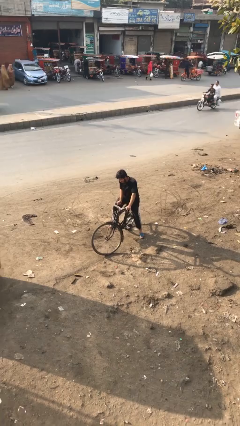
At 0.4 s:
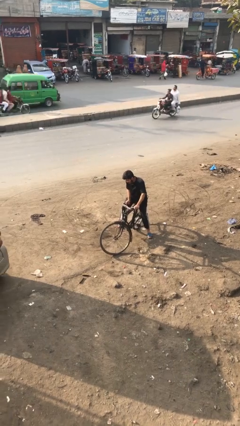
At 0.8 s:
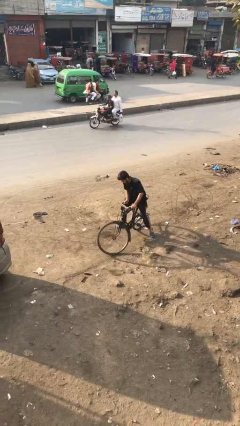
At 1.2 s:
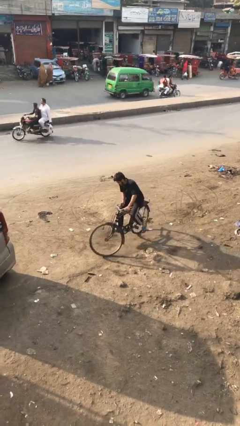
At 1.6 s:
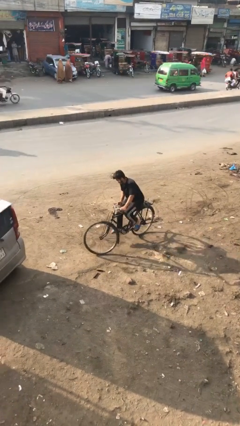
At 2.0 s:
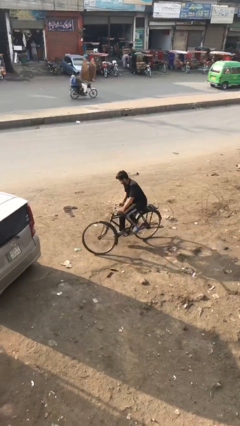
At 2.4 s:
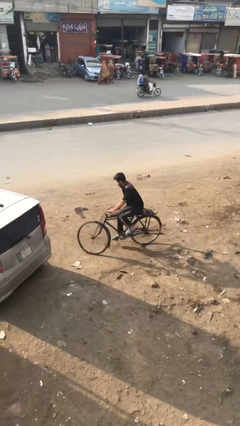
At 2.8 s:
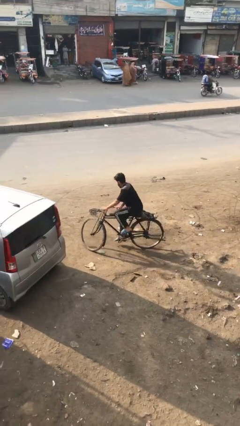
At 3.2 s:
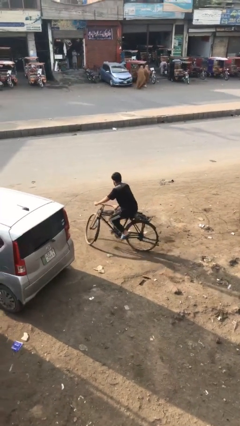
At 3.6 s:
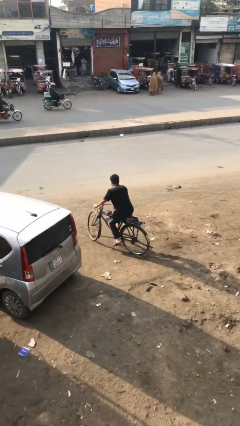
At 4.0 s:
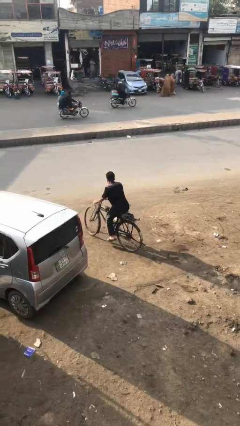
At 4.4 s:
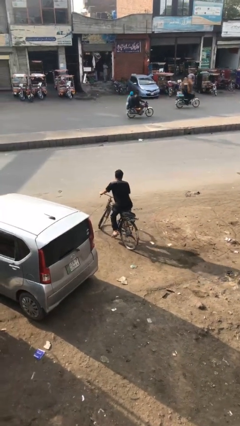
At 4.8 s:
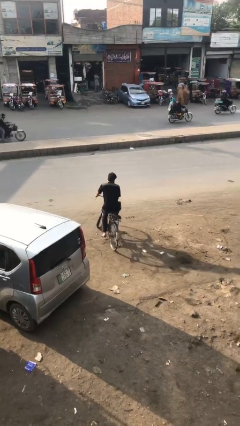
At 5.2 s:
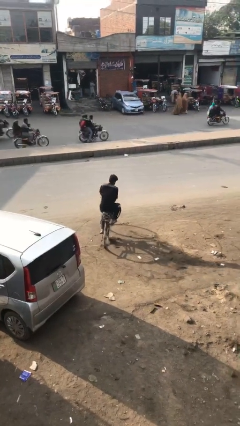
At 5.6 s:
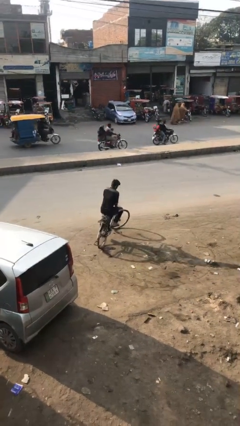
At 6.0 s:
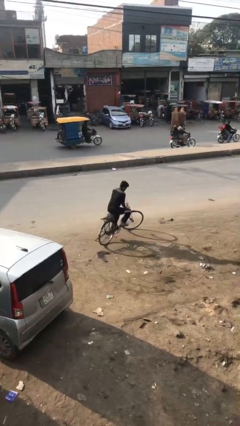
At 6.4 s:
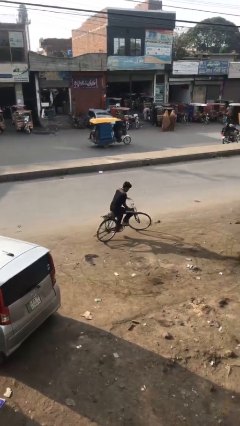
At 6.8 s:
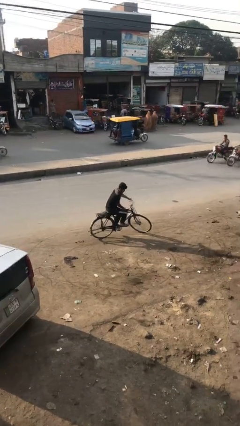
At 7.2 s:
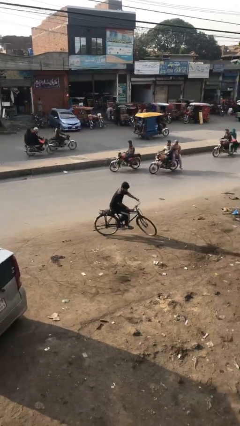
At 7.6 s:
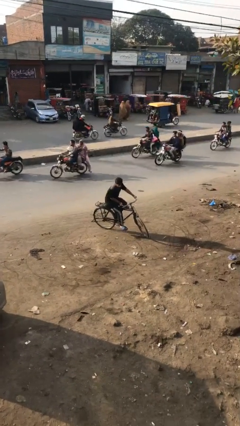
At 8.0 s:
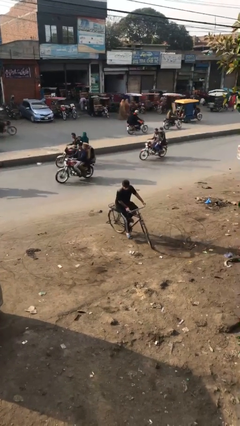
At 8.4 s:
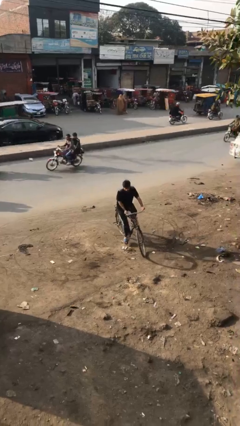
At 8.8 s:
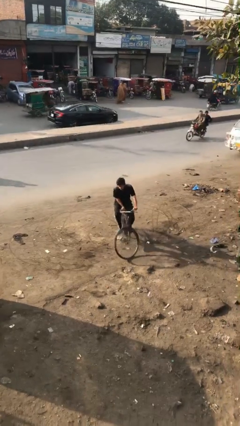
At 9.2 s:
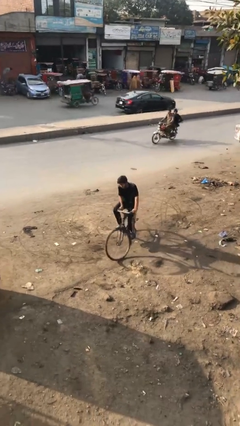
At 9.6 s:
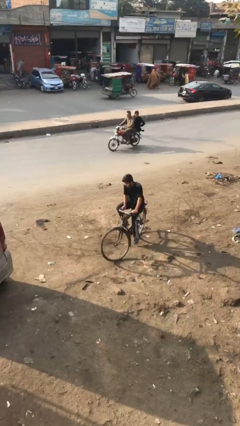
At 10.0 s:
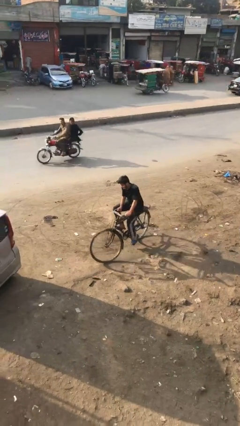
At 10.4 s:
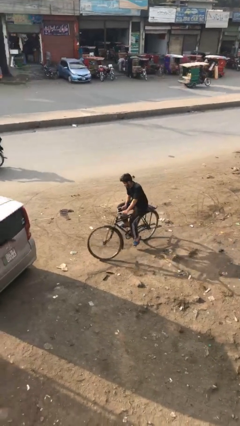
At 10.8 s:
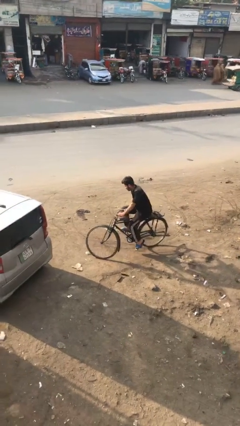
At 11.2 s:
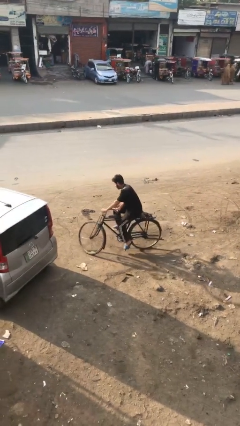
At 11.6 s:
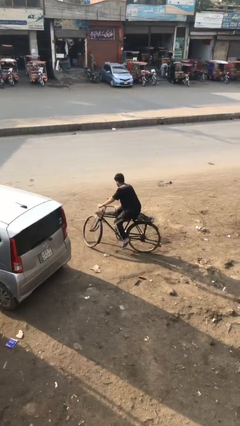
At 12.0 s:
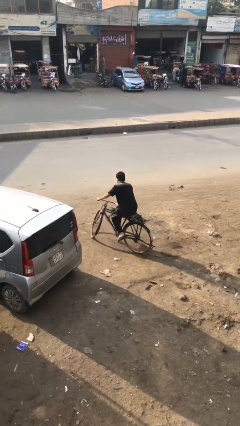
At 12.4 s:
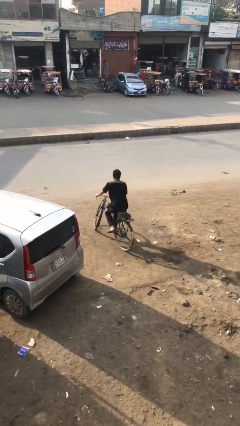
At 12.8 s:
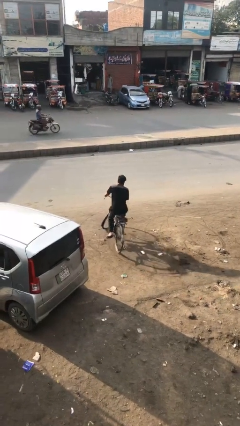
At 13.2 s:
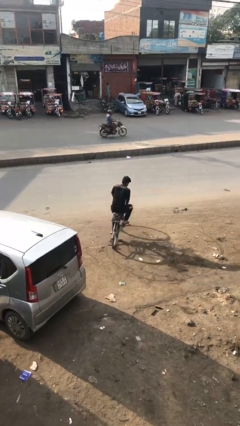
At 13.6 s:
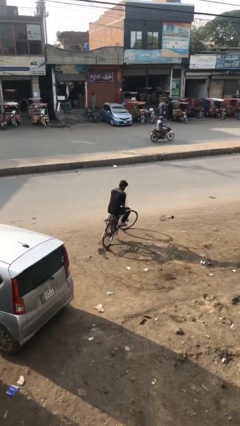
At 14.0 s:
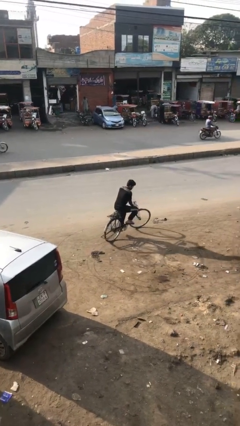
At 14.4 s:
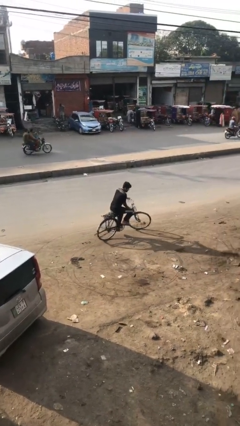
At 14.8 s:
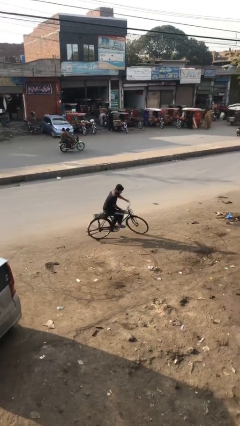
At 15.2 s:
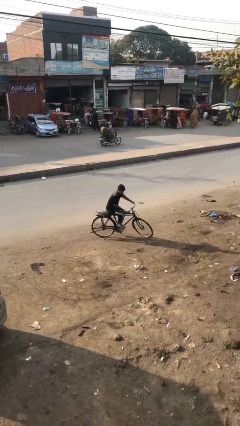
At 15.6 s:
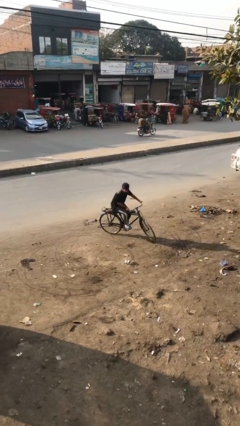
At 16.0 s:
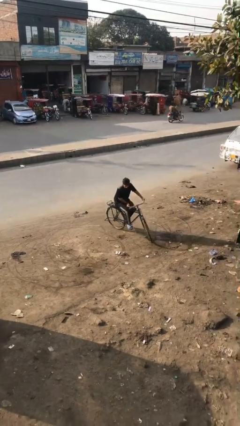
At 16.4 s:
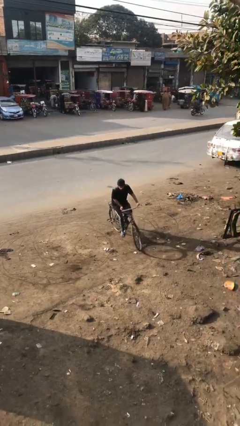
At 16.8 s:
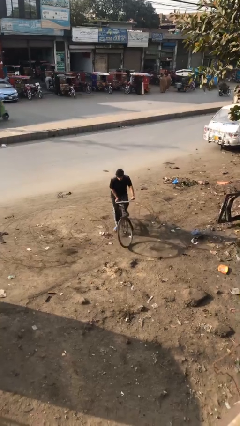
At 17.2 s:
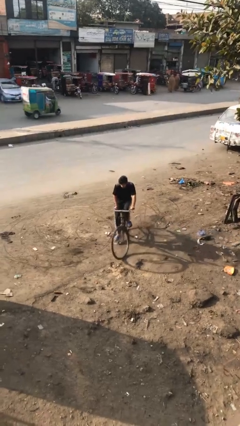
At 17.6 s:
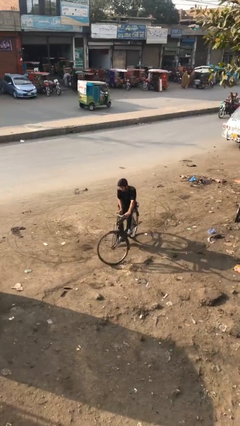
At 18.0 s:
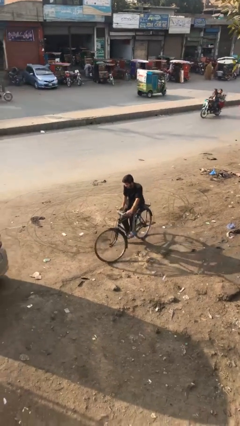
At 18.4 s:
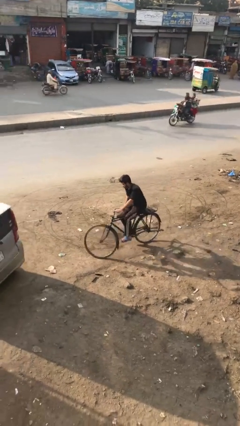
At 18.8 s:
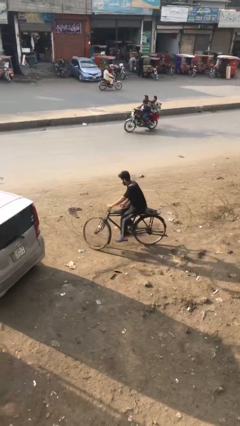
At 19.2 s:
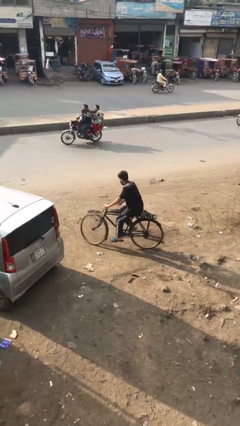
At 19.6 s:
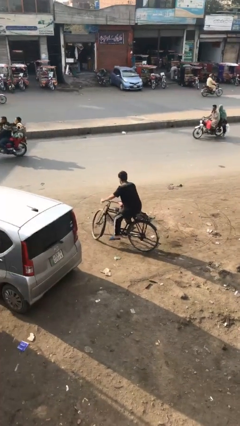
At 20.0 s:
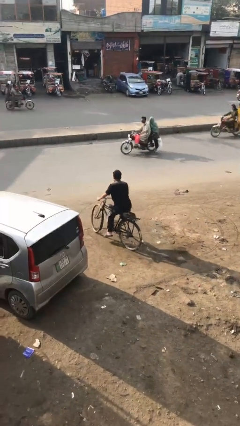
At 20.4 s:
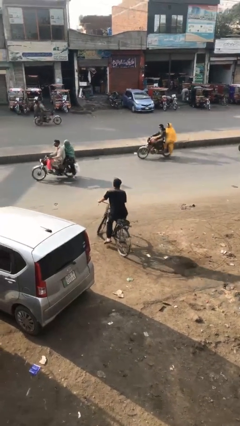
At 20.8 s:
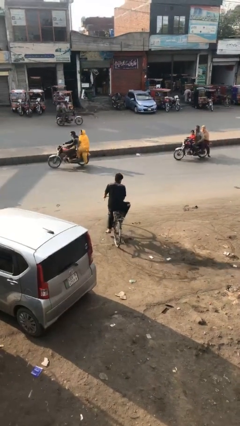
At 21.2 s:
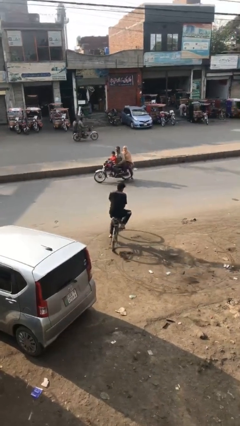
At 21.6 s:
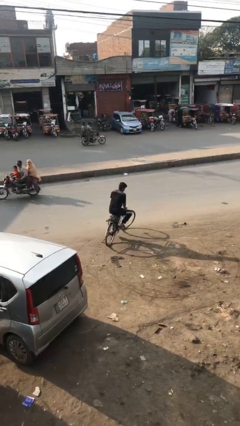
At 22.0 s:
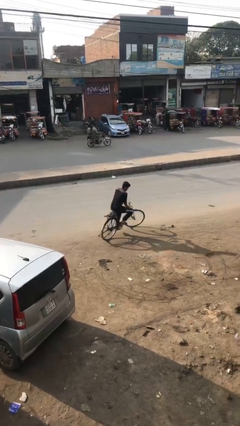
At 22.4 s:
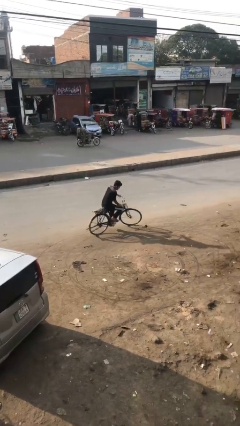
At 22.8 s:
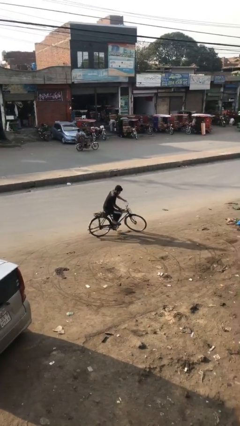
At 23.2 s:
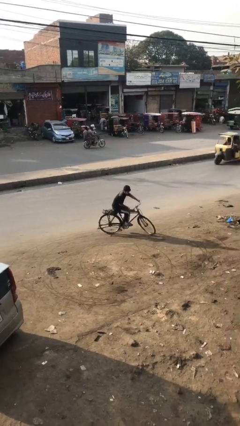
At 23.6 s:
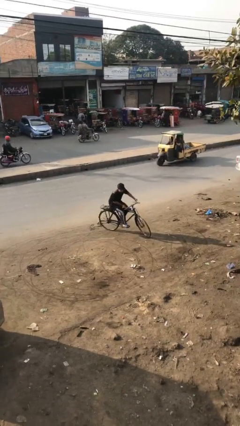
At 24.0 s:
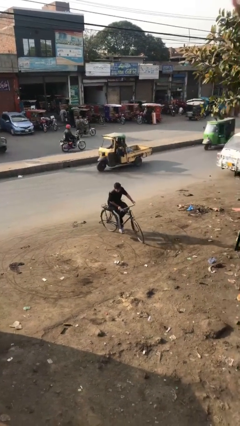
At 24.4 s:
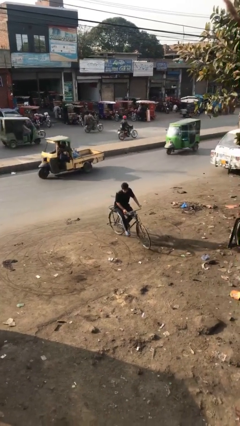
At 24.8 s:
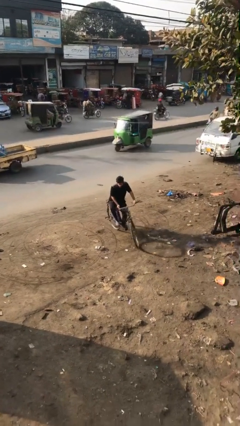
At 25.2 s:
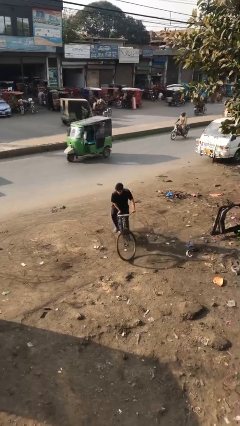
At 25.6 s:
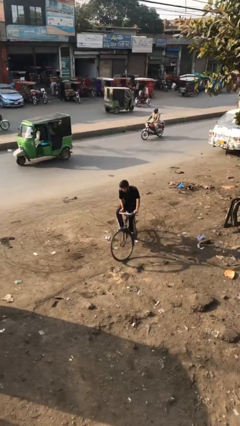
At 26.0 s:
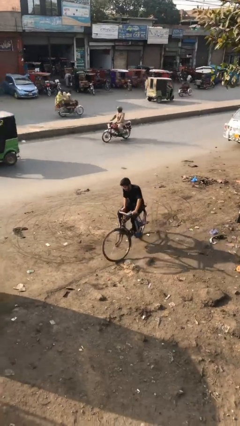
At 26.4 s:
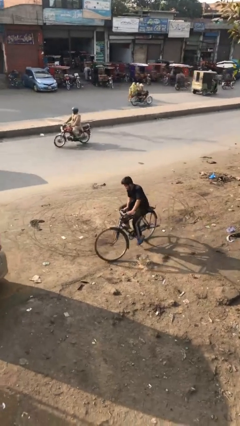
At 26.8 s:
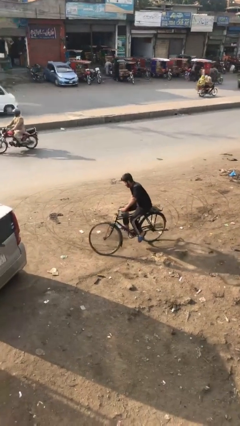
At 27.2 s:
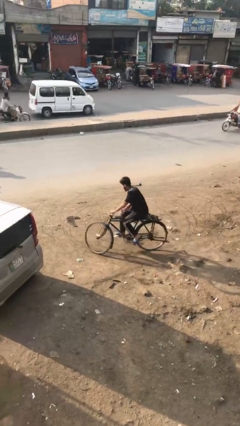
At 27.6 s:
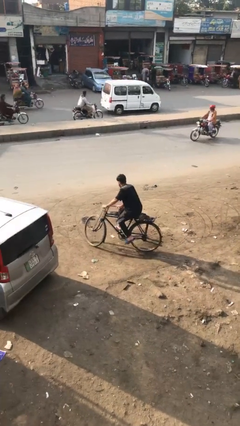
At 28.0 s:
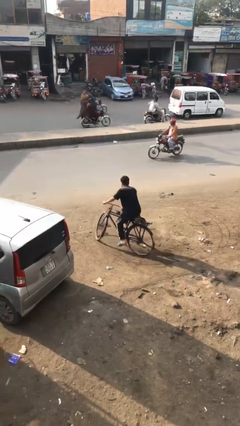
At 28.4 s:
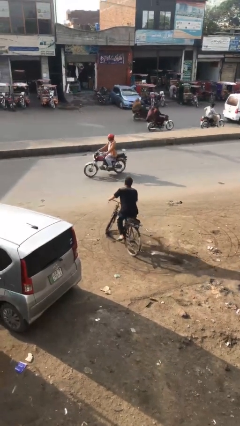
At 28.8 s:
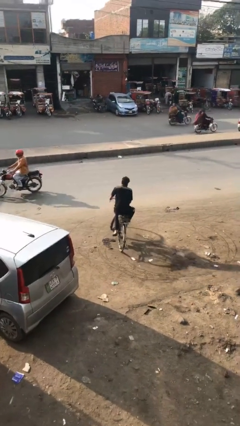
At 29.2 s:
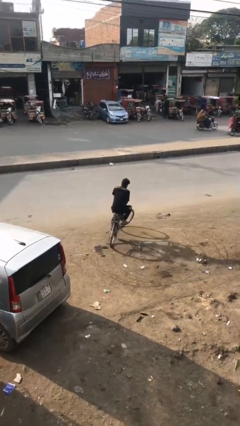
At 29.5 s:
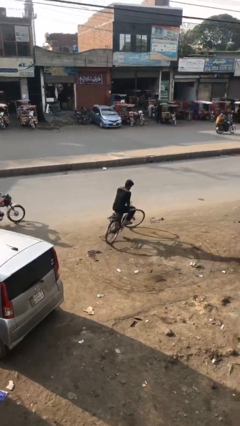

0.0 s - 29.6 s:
person rides bicycle

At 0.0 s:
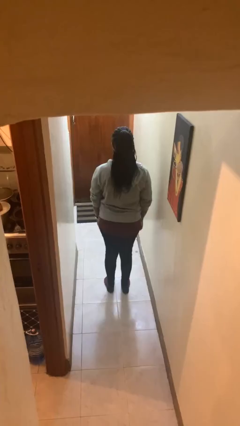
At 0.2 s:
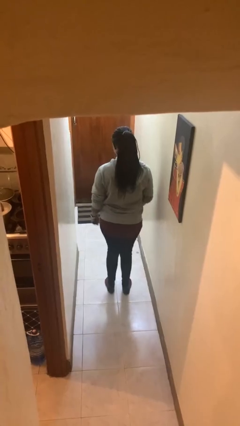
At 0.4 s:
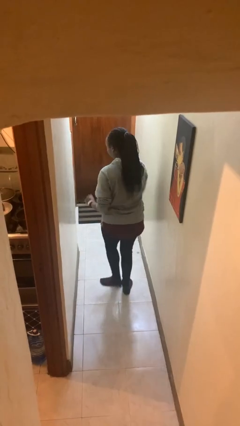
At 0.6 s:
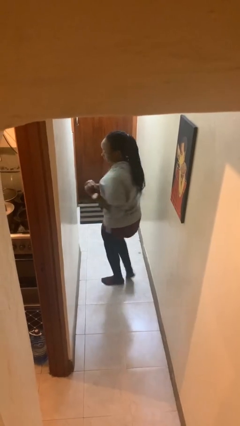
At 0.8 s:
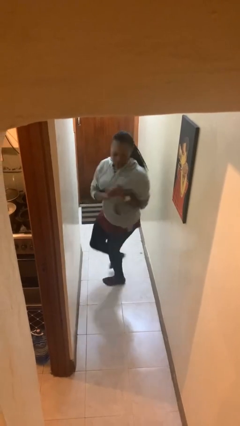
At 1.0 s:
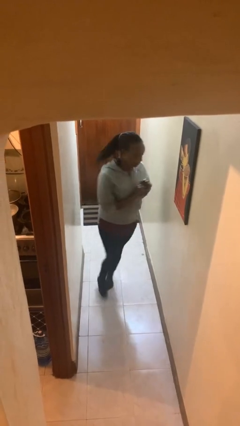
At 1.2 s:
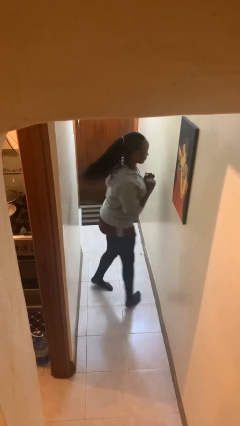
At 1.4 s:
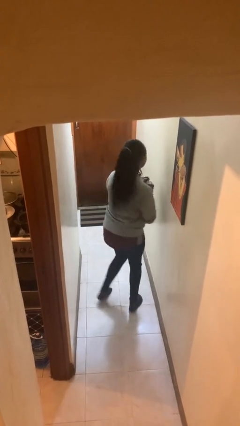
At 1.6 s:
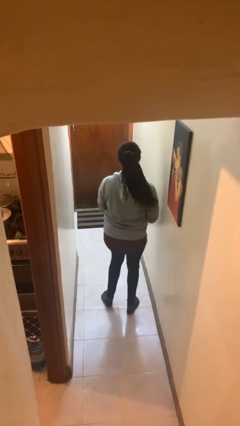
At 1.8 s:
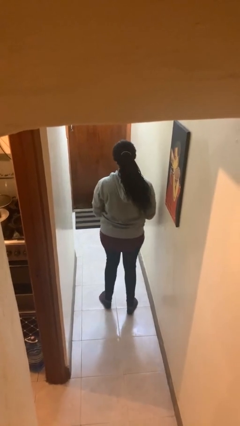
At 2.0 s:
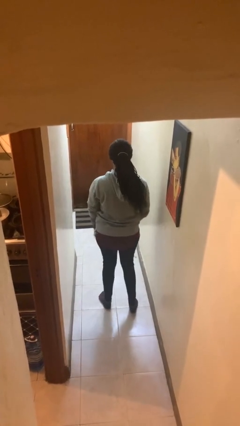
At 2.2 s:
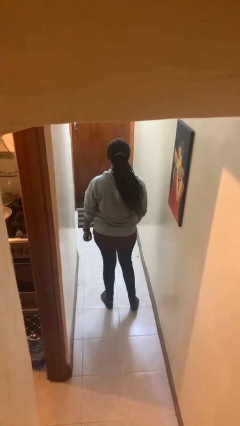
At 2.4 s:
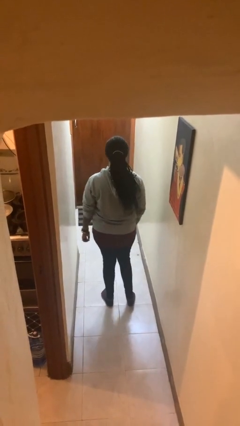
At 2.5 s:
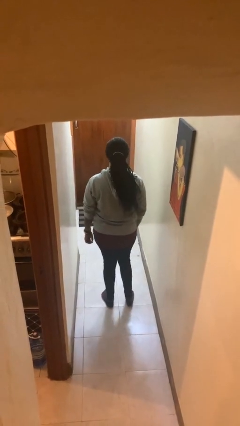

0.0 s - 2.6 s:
person twirls

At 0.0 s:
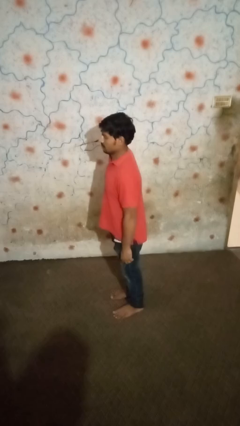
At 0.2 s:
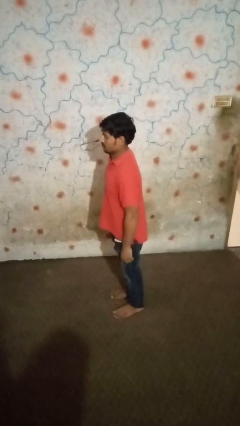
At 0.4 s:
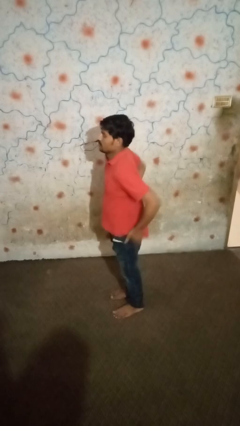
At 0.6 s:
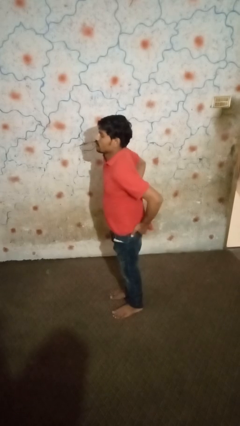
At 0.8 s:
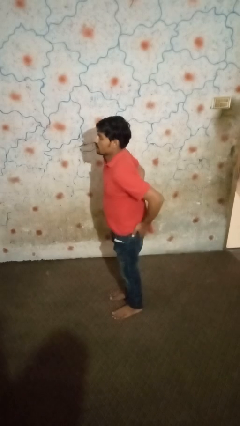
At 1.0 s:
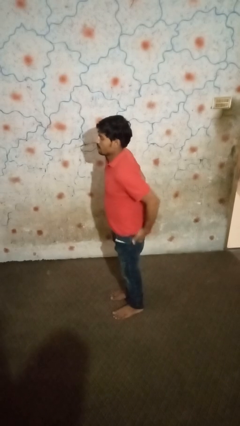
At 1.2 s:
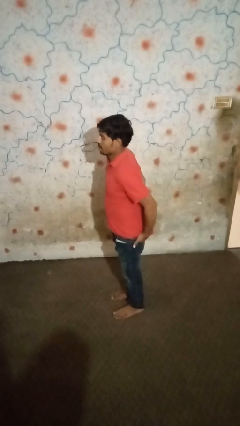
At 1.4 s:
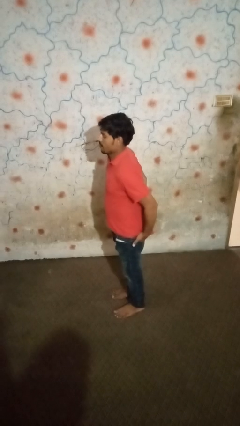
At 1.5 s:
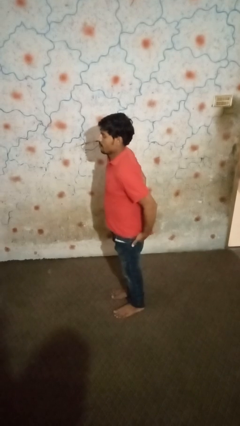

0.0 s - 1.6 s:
person puts hands in back pockets
